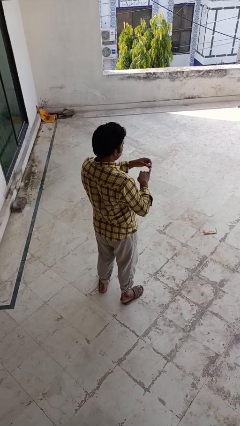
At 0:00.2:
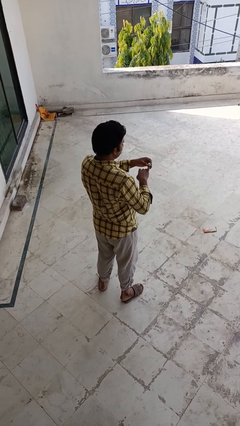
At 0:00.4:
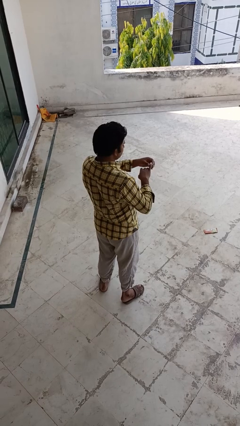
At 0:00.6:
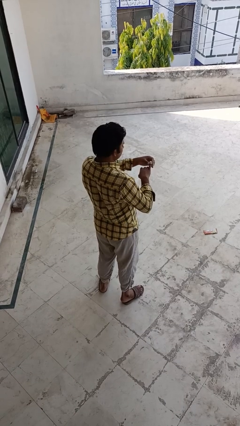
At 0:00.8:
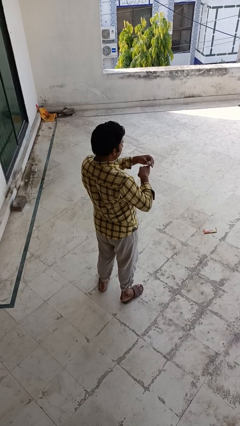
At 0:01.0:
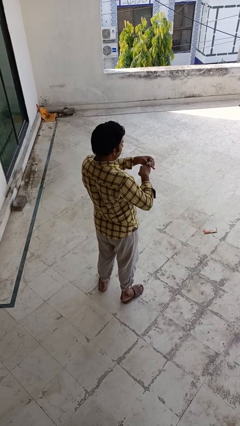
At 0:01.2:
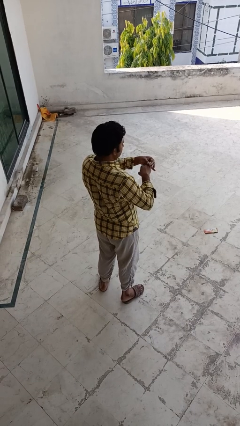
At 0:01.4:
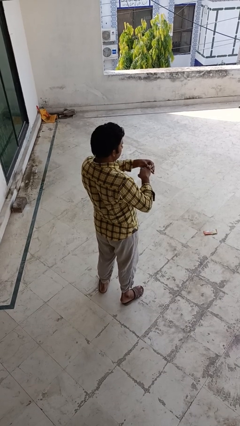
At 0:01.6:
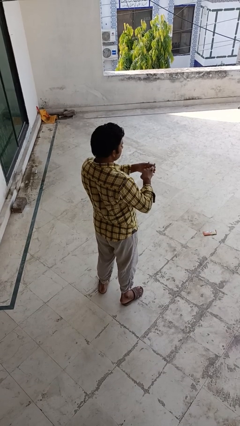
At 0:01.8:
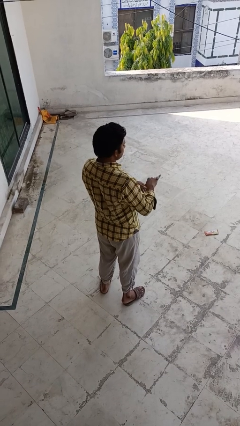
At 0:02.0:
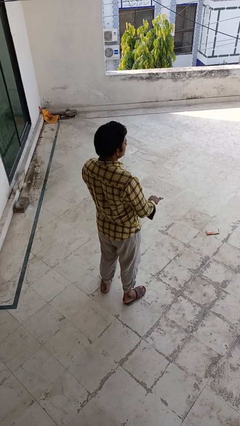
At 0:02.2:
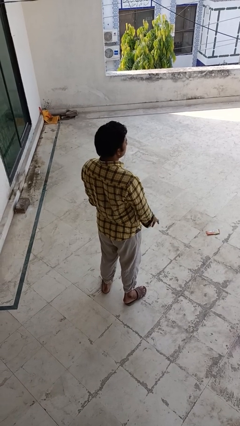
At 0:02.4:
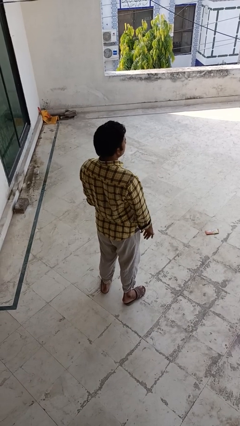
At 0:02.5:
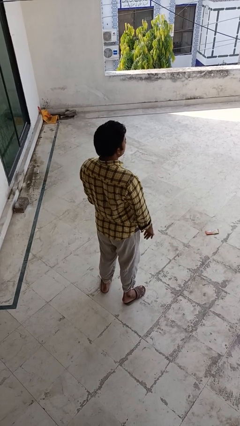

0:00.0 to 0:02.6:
person puts on ring

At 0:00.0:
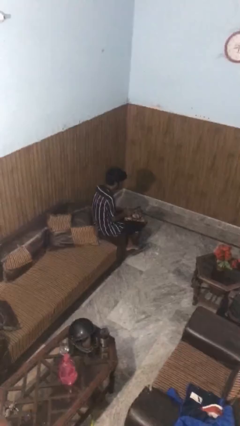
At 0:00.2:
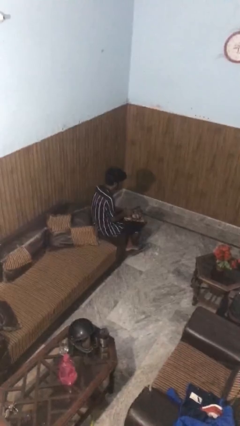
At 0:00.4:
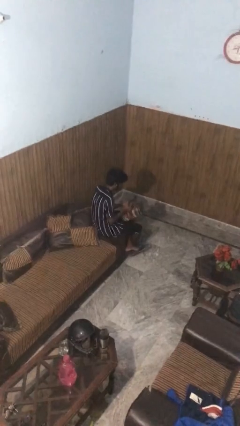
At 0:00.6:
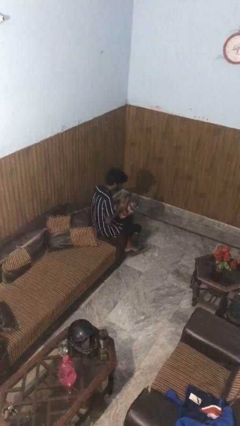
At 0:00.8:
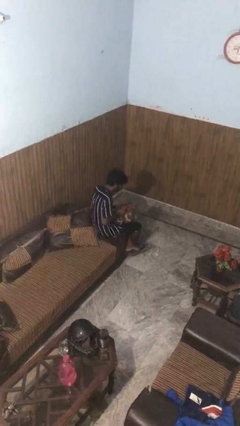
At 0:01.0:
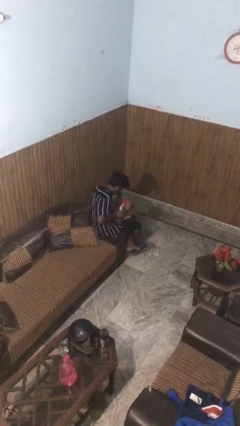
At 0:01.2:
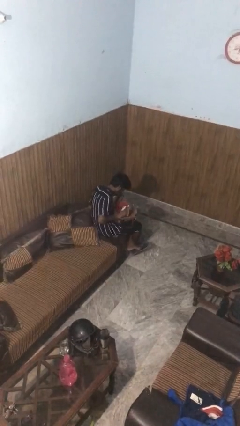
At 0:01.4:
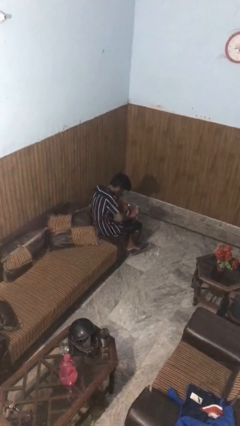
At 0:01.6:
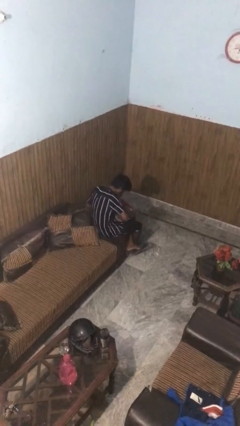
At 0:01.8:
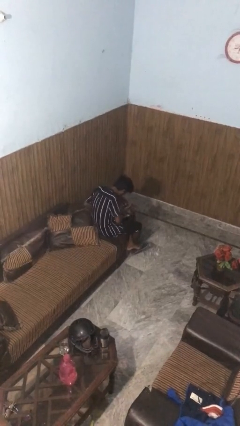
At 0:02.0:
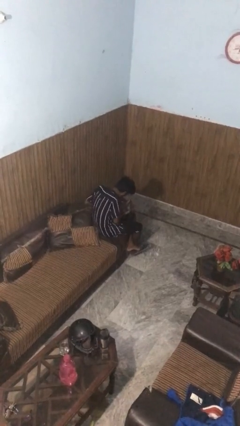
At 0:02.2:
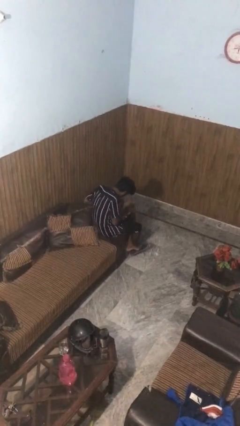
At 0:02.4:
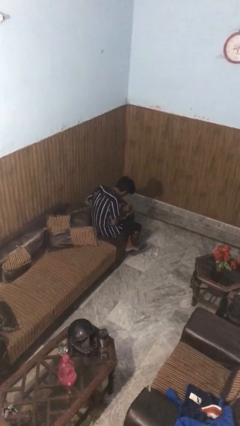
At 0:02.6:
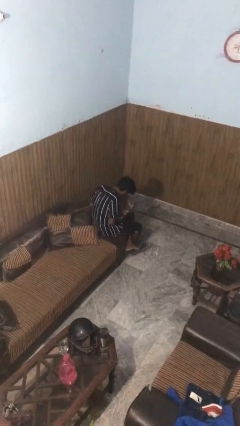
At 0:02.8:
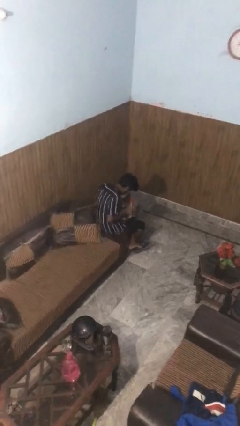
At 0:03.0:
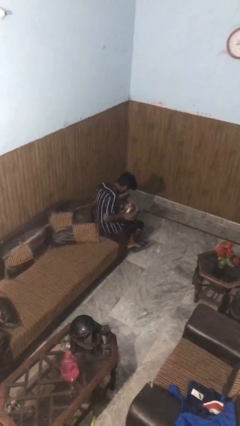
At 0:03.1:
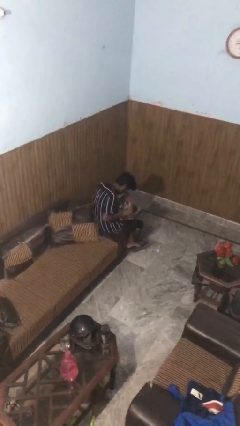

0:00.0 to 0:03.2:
person searches in purse

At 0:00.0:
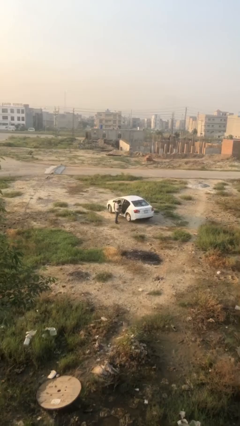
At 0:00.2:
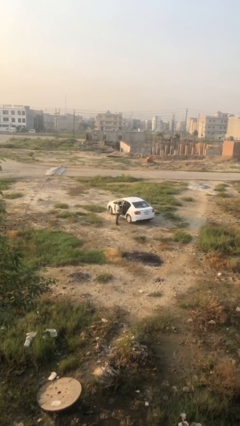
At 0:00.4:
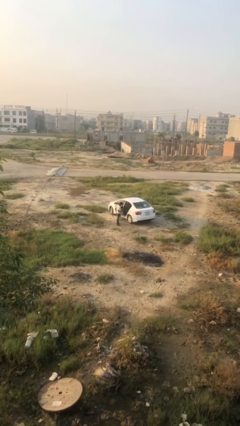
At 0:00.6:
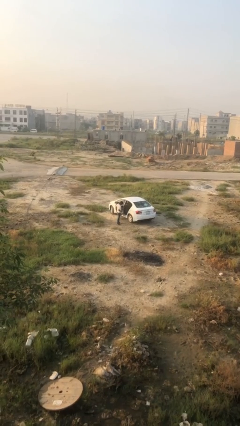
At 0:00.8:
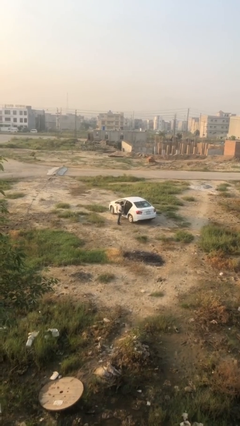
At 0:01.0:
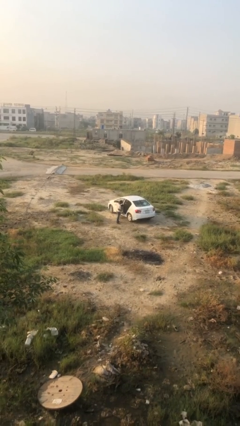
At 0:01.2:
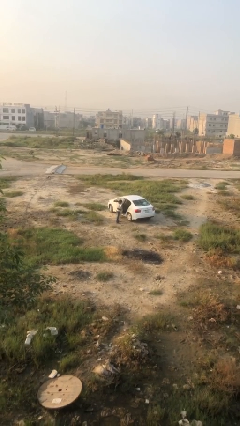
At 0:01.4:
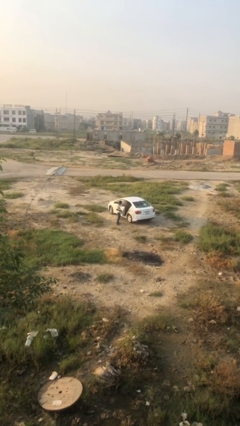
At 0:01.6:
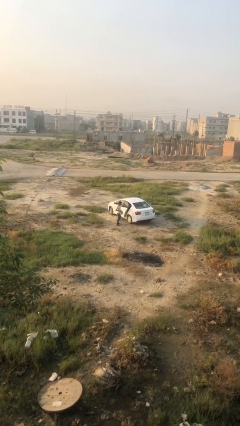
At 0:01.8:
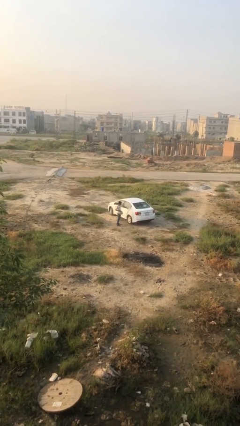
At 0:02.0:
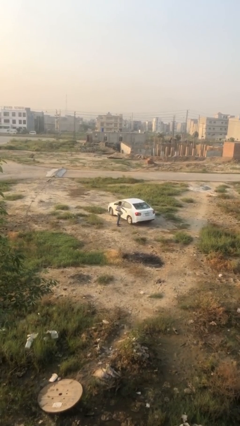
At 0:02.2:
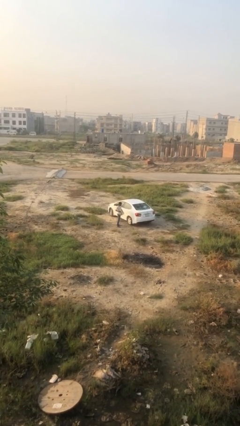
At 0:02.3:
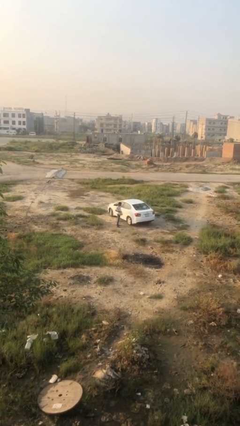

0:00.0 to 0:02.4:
person closes car door

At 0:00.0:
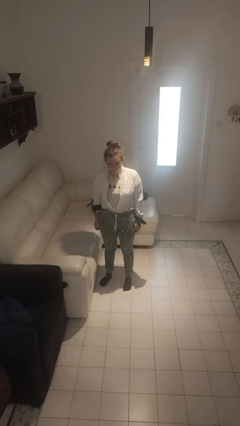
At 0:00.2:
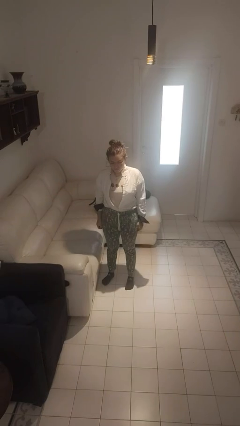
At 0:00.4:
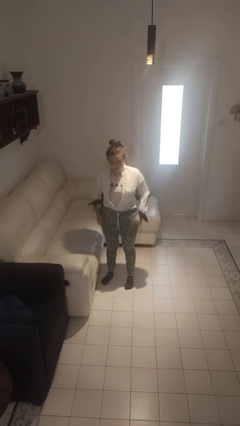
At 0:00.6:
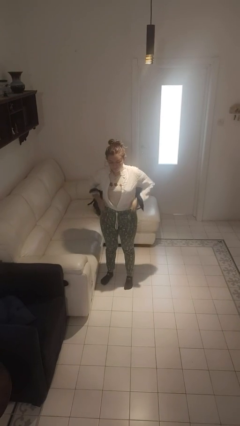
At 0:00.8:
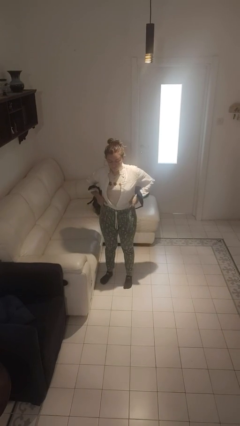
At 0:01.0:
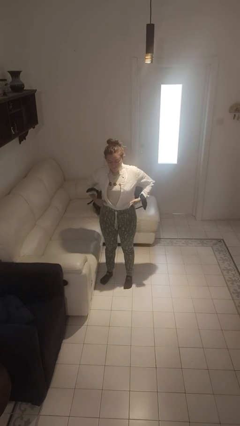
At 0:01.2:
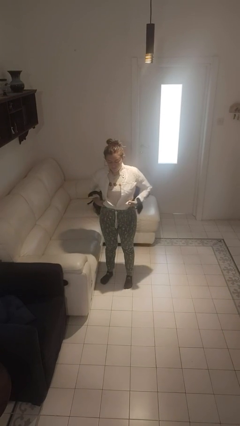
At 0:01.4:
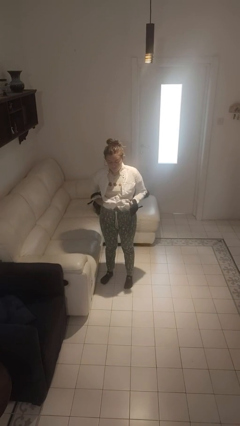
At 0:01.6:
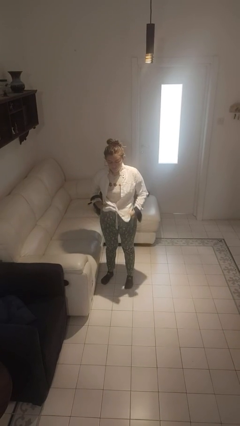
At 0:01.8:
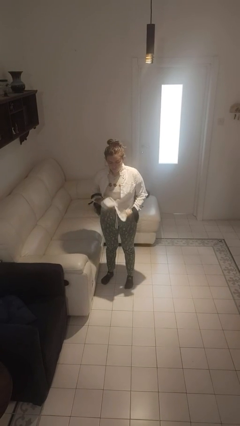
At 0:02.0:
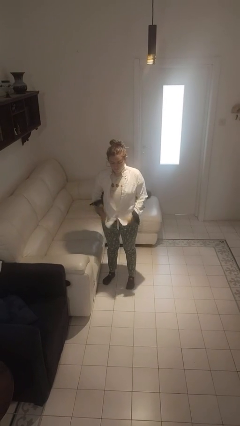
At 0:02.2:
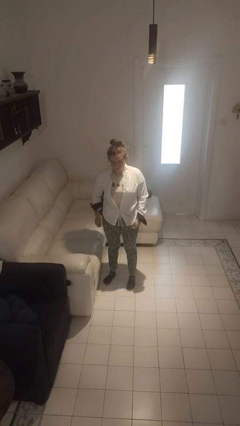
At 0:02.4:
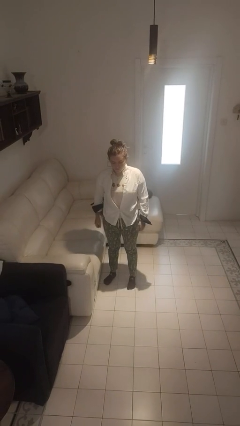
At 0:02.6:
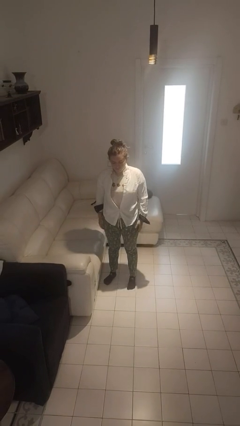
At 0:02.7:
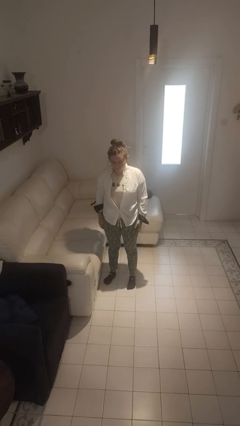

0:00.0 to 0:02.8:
person untucks shirt

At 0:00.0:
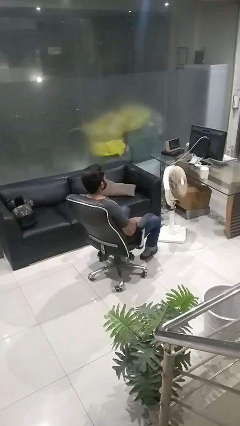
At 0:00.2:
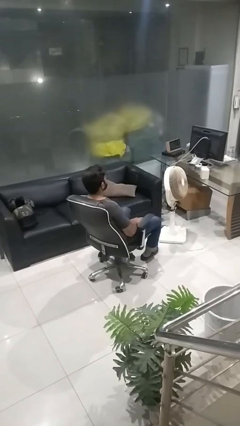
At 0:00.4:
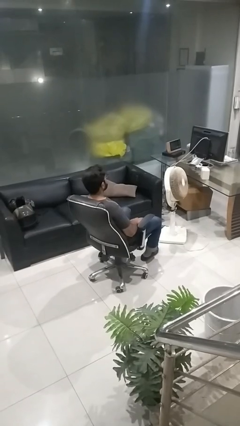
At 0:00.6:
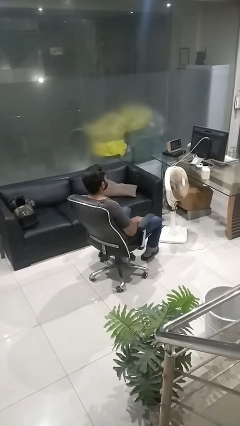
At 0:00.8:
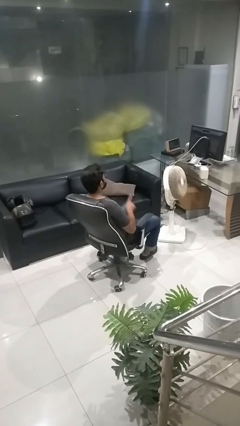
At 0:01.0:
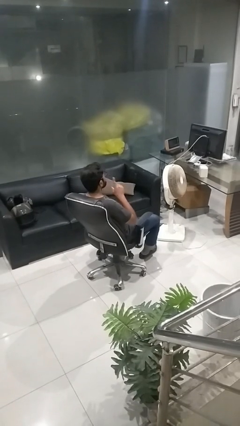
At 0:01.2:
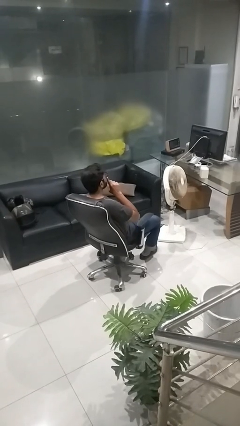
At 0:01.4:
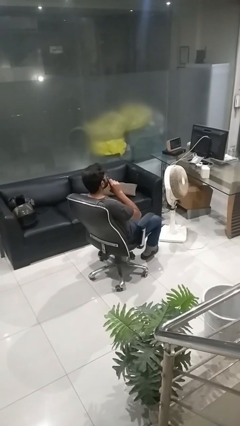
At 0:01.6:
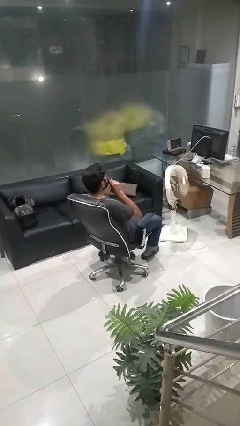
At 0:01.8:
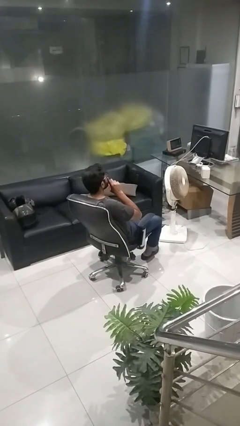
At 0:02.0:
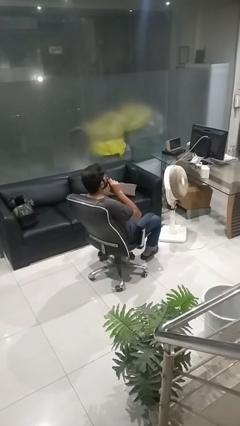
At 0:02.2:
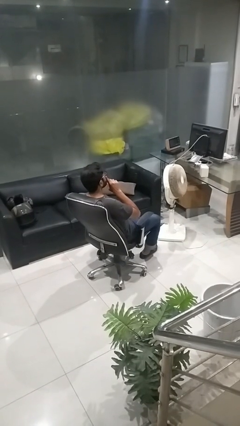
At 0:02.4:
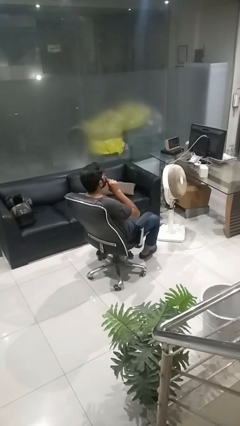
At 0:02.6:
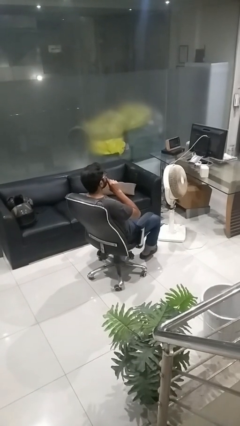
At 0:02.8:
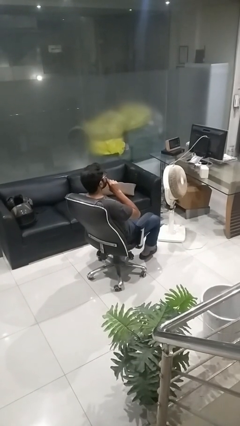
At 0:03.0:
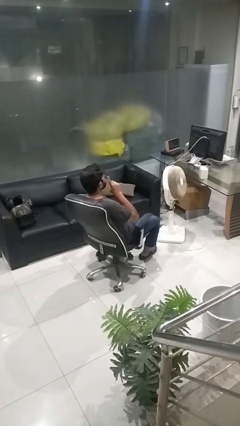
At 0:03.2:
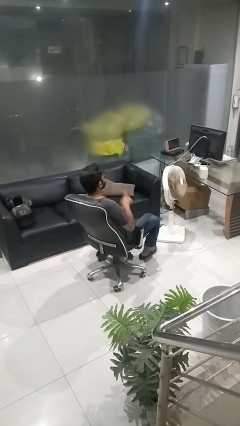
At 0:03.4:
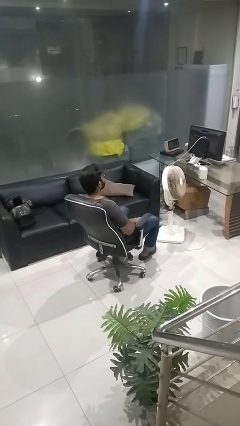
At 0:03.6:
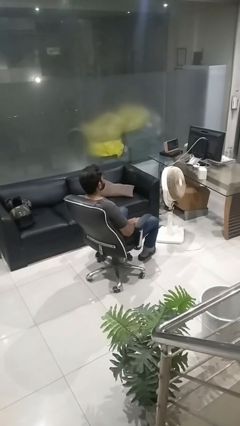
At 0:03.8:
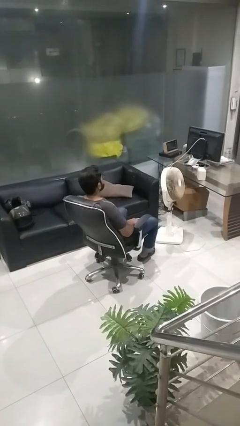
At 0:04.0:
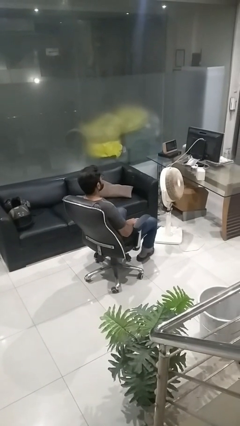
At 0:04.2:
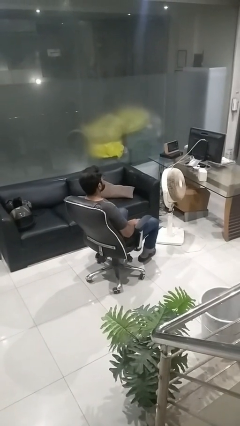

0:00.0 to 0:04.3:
person gestures be quiet

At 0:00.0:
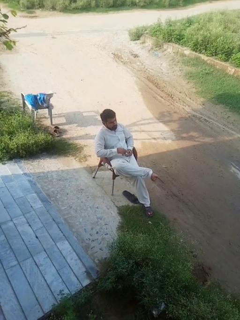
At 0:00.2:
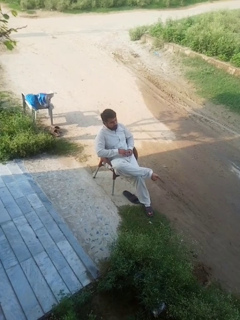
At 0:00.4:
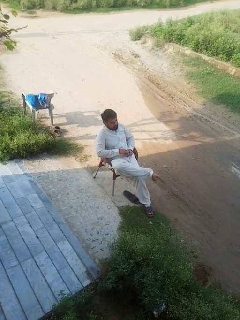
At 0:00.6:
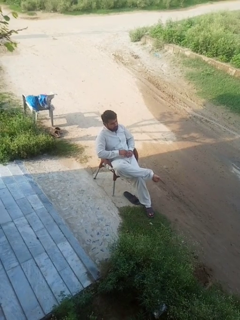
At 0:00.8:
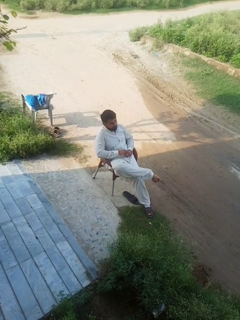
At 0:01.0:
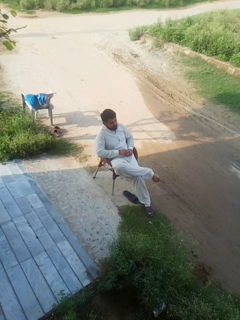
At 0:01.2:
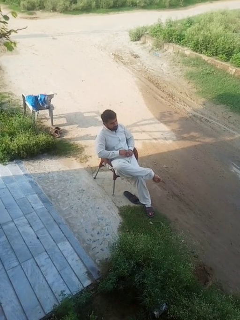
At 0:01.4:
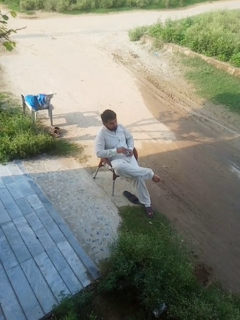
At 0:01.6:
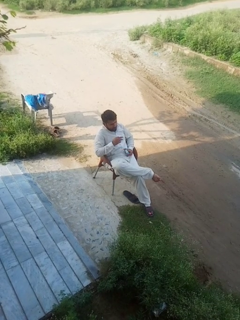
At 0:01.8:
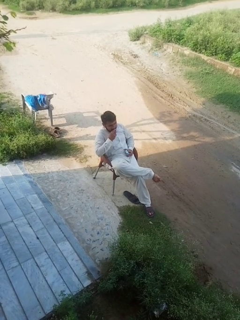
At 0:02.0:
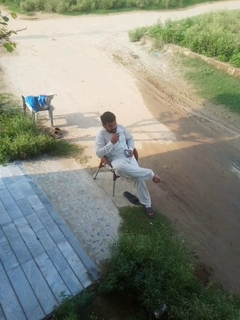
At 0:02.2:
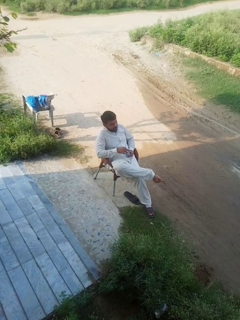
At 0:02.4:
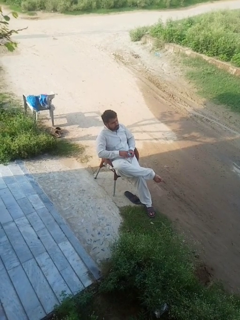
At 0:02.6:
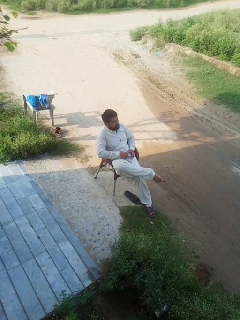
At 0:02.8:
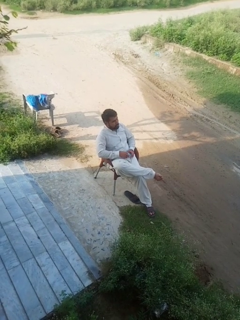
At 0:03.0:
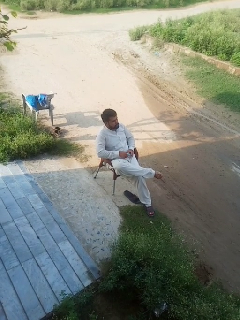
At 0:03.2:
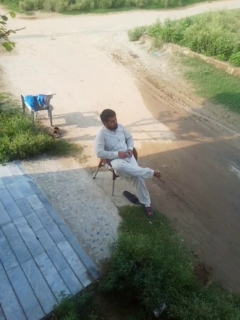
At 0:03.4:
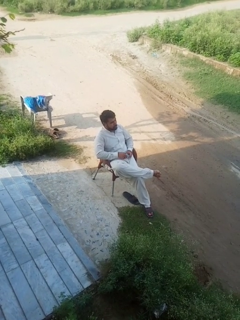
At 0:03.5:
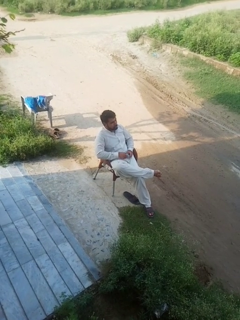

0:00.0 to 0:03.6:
person eats snack from bag
